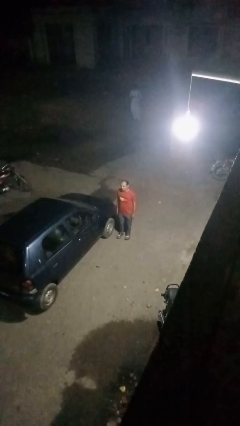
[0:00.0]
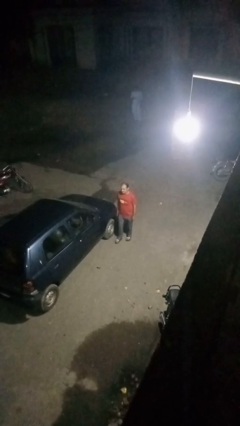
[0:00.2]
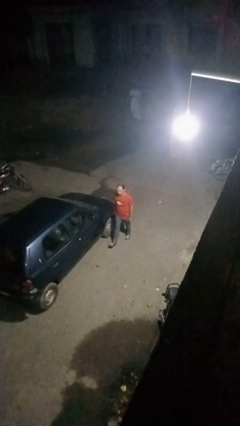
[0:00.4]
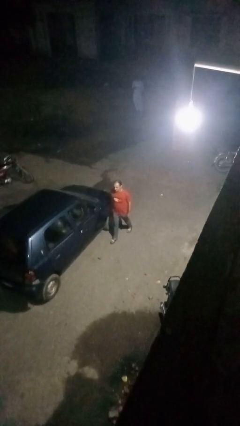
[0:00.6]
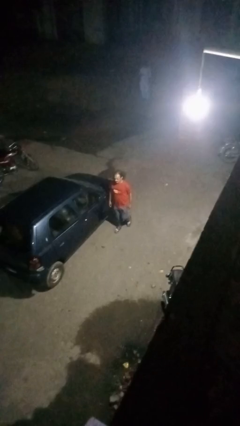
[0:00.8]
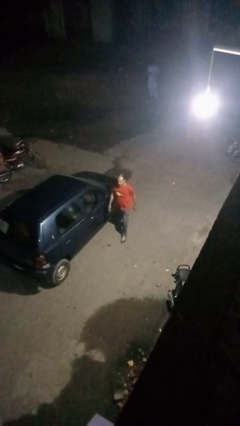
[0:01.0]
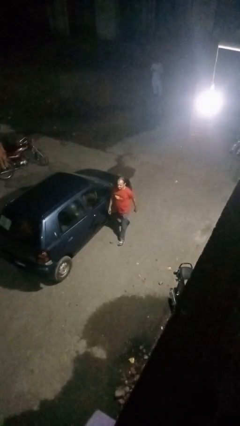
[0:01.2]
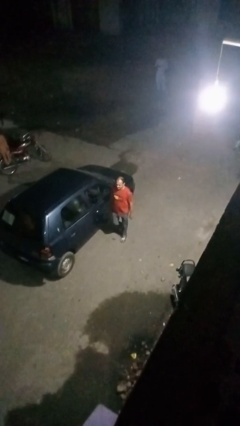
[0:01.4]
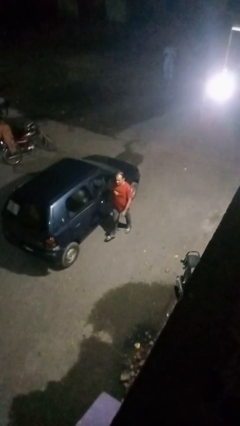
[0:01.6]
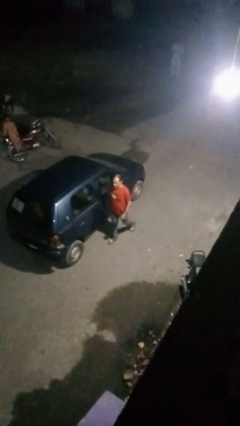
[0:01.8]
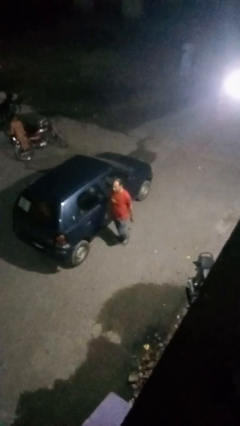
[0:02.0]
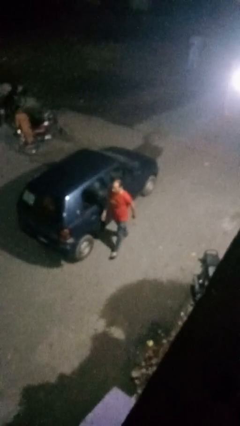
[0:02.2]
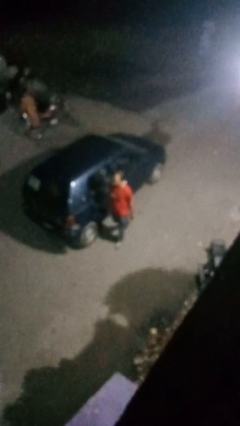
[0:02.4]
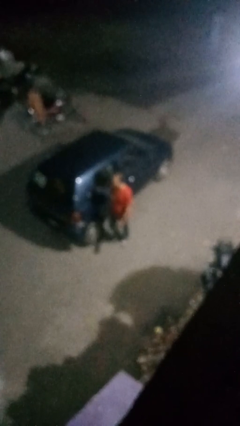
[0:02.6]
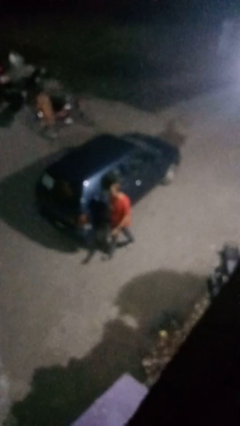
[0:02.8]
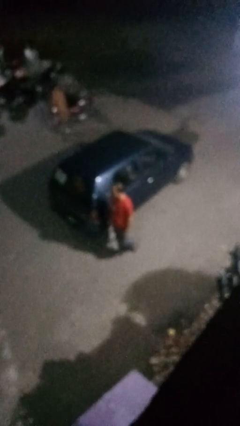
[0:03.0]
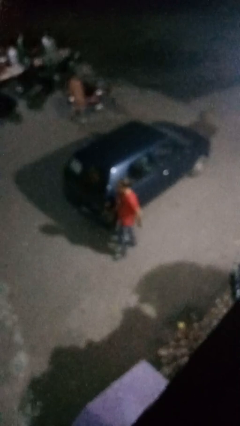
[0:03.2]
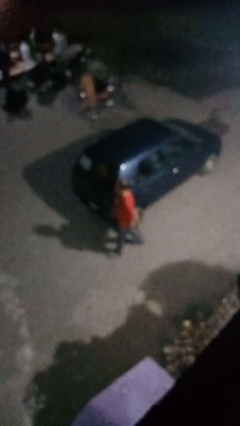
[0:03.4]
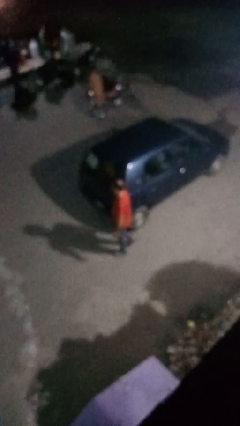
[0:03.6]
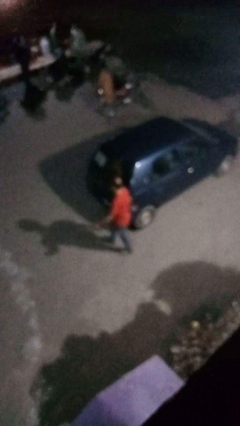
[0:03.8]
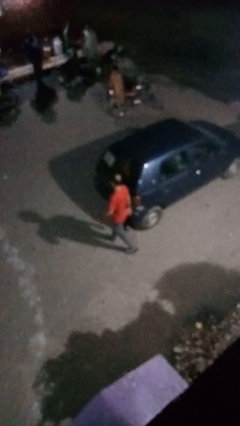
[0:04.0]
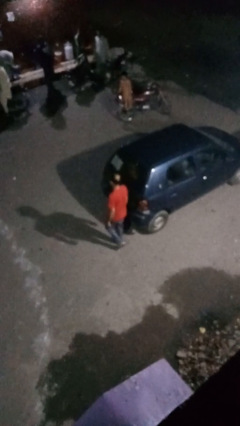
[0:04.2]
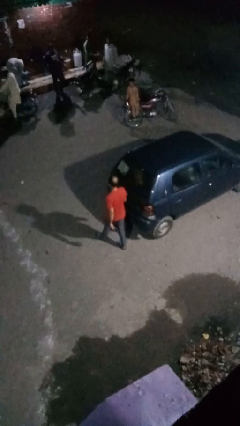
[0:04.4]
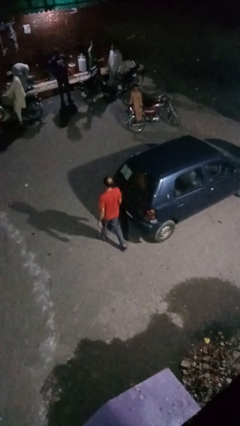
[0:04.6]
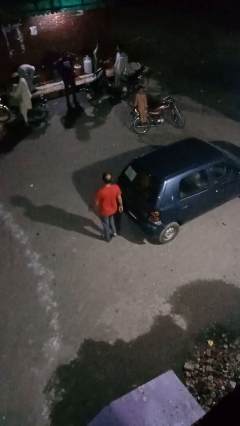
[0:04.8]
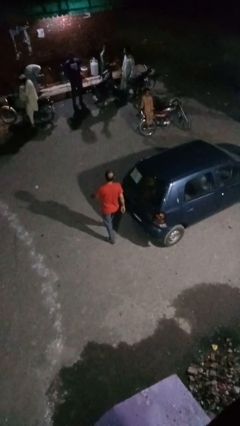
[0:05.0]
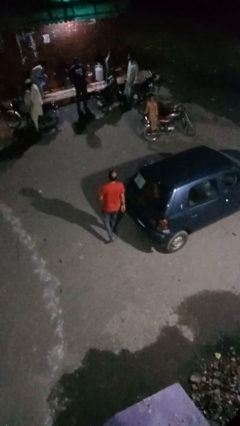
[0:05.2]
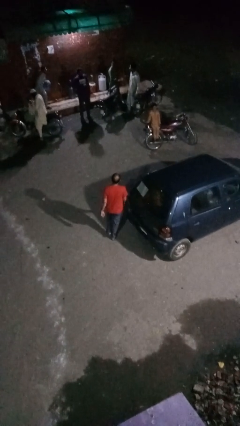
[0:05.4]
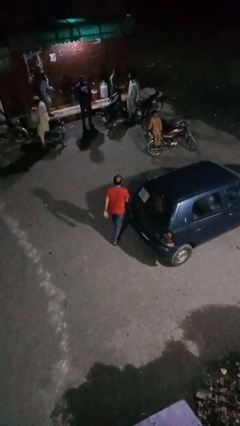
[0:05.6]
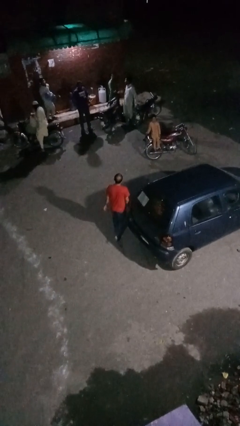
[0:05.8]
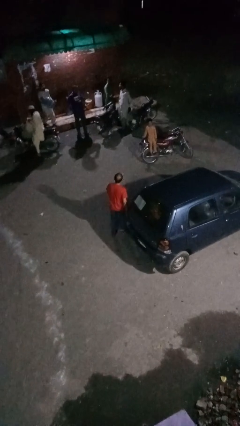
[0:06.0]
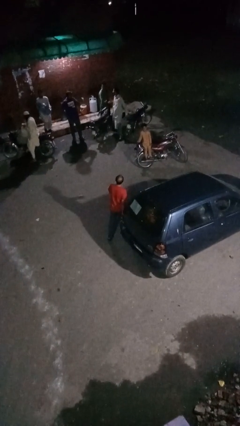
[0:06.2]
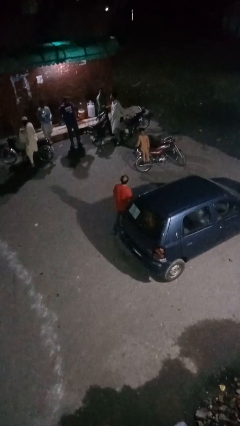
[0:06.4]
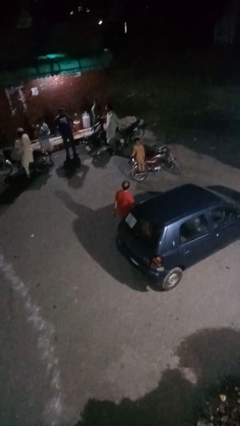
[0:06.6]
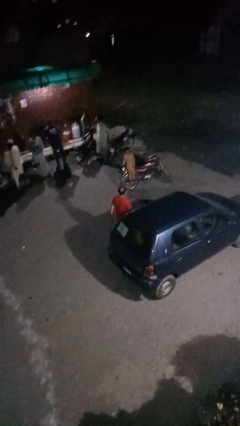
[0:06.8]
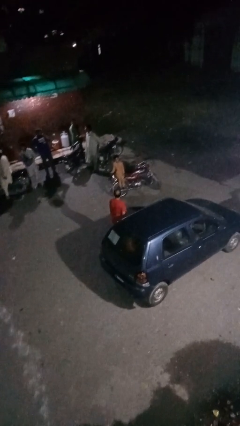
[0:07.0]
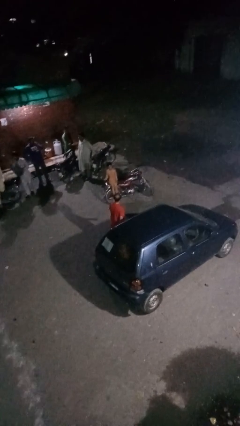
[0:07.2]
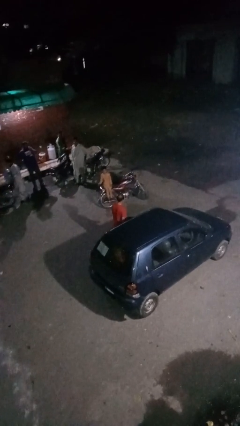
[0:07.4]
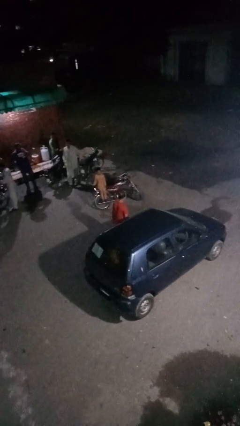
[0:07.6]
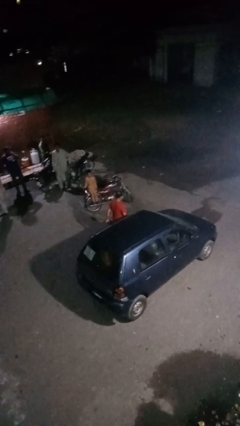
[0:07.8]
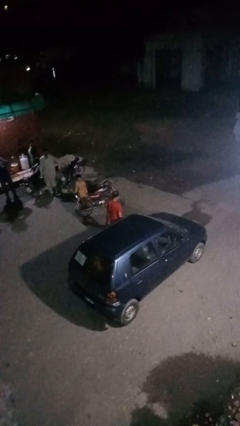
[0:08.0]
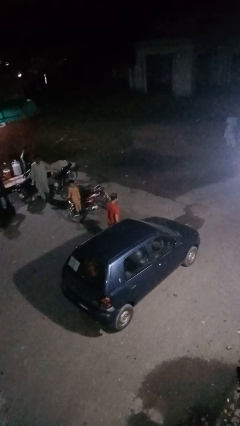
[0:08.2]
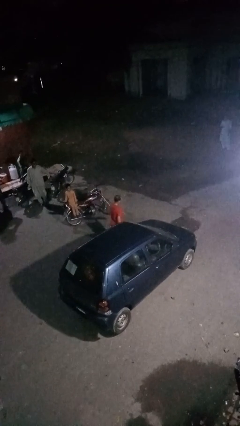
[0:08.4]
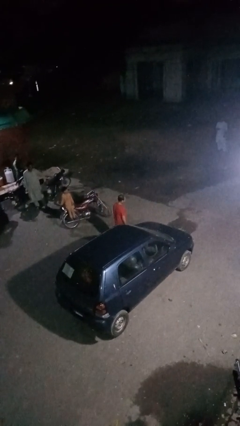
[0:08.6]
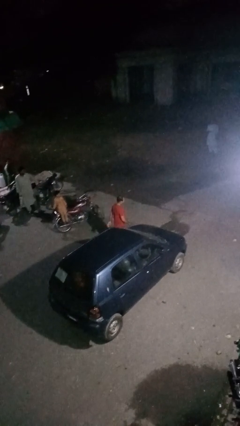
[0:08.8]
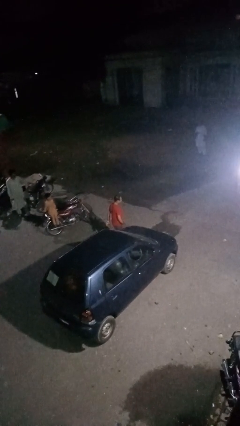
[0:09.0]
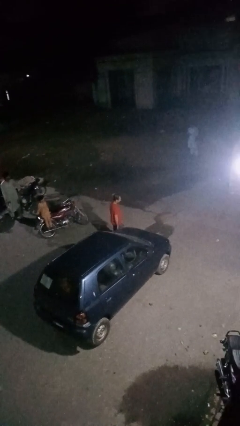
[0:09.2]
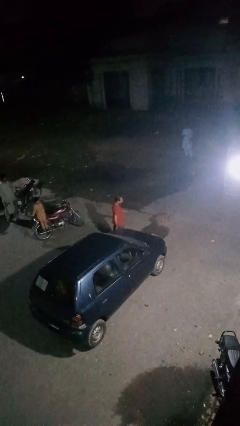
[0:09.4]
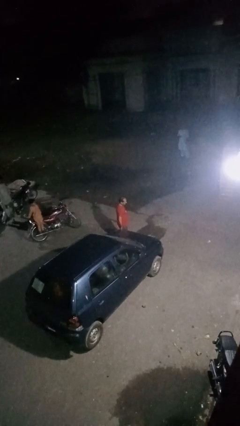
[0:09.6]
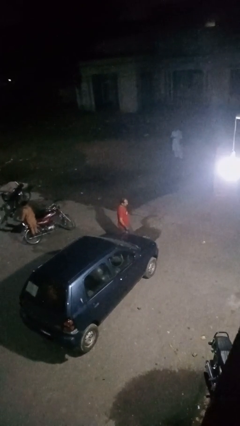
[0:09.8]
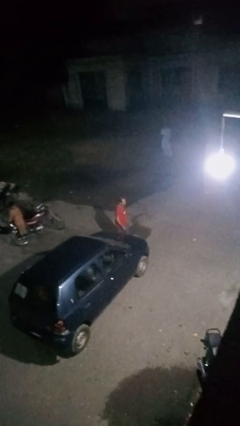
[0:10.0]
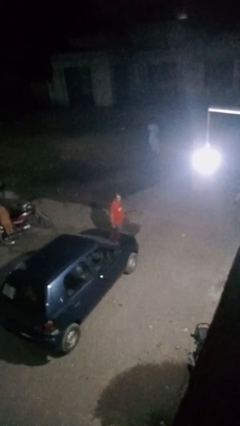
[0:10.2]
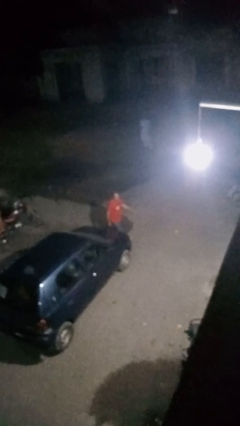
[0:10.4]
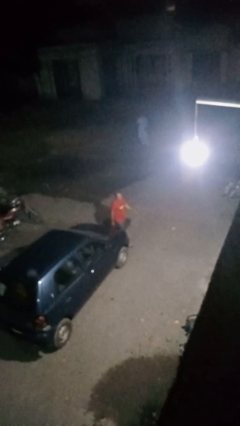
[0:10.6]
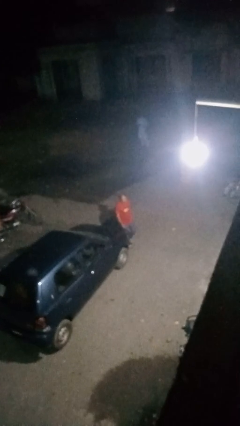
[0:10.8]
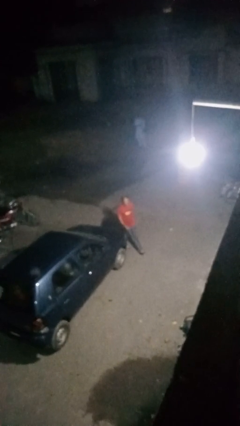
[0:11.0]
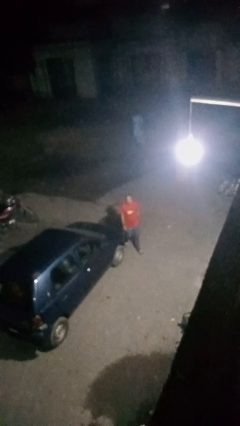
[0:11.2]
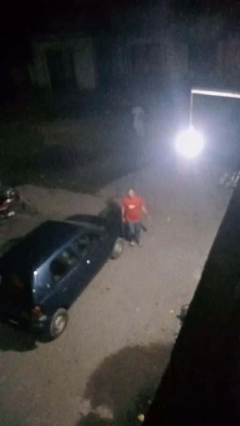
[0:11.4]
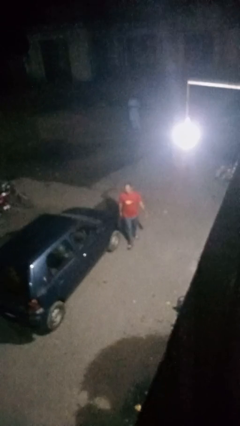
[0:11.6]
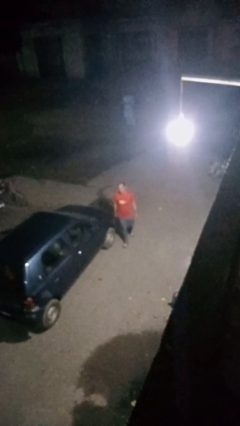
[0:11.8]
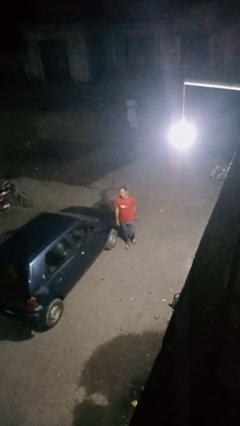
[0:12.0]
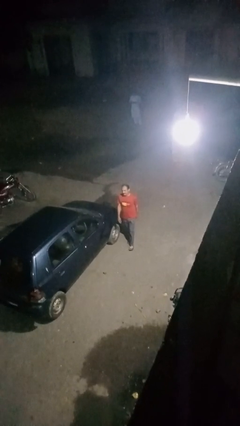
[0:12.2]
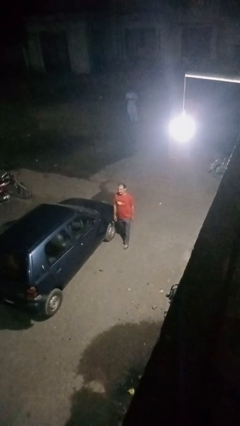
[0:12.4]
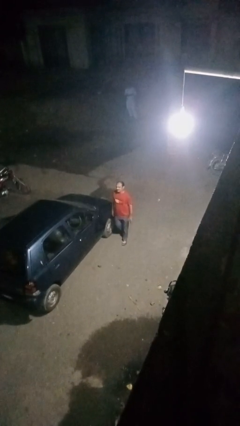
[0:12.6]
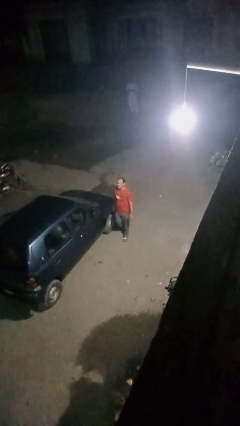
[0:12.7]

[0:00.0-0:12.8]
person walks around car

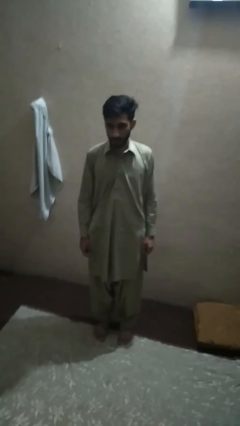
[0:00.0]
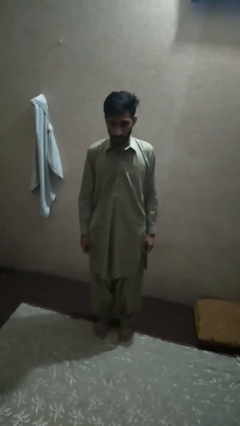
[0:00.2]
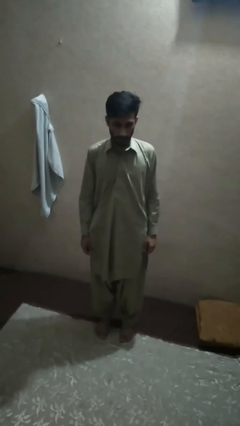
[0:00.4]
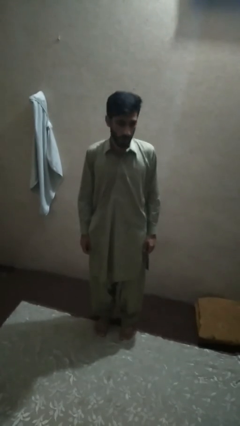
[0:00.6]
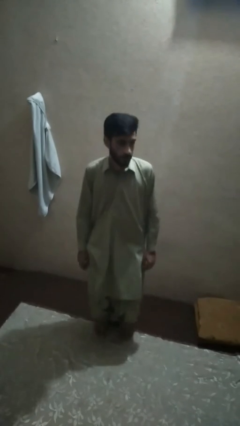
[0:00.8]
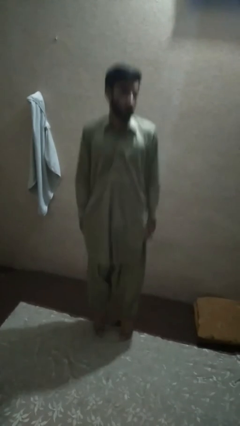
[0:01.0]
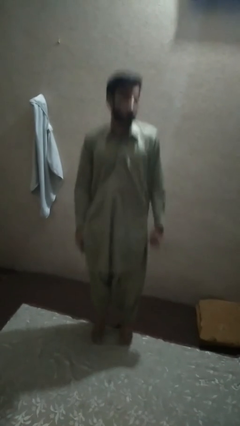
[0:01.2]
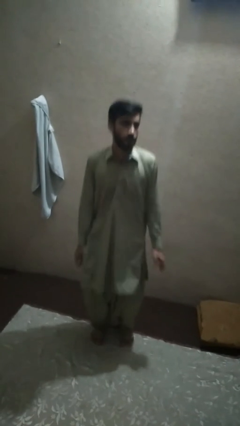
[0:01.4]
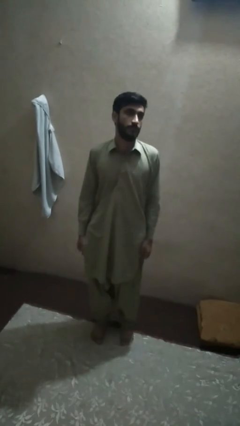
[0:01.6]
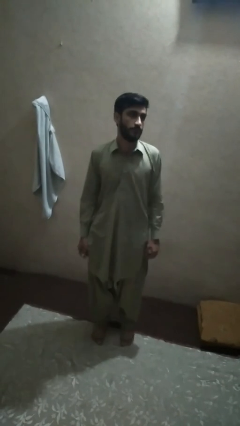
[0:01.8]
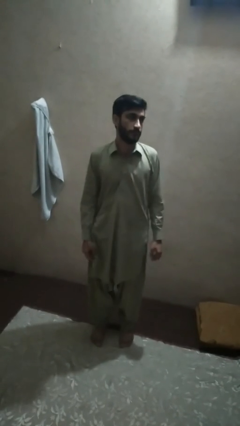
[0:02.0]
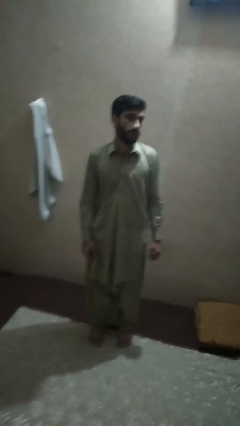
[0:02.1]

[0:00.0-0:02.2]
person jumps

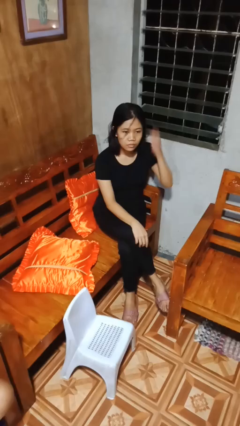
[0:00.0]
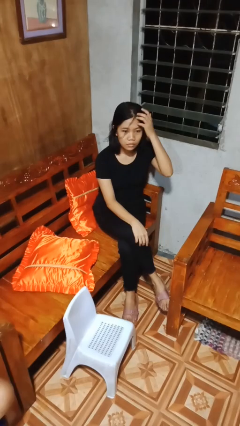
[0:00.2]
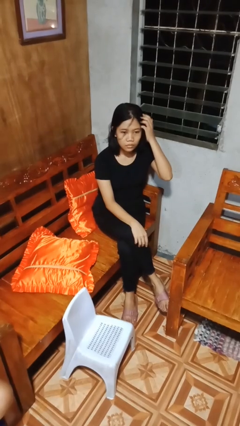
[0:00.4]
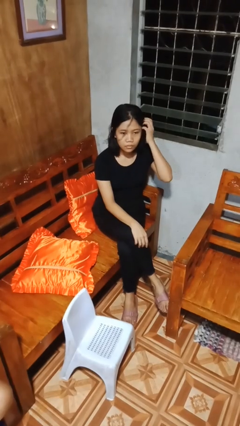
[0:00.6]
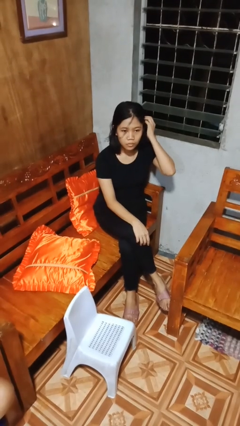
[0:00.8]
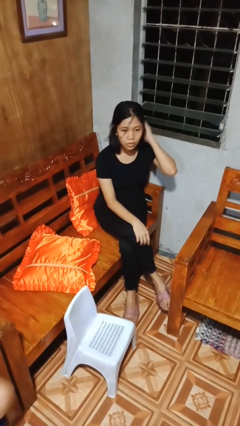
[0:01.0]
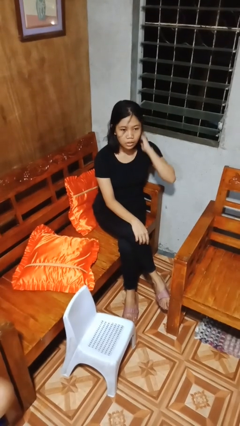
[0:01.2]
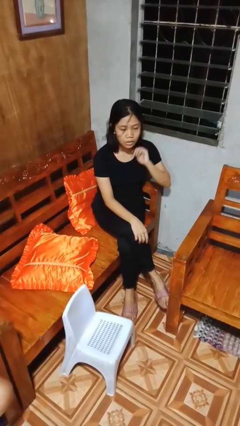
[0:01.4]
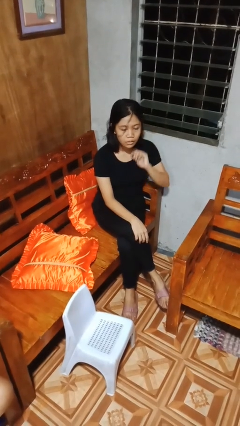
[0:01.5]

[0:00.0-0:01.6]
person strokes hair

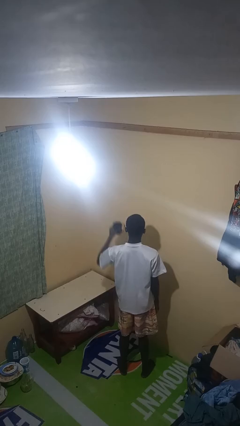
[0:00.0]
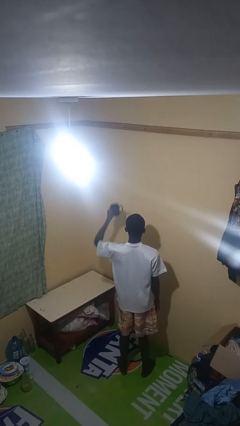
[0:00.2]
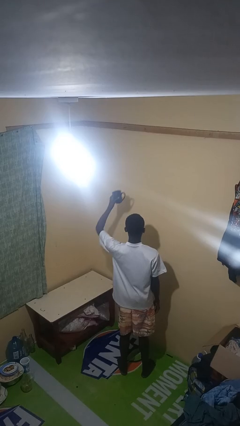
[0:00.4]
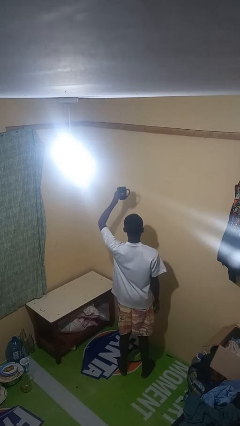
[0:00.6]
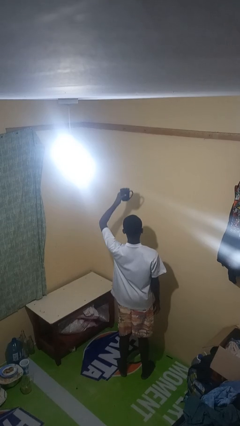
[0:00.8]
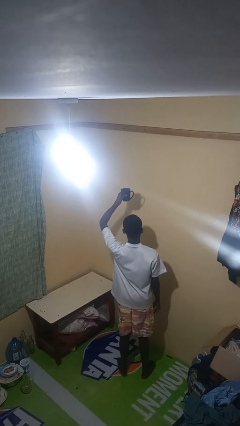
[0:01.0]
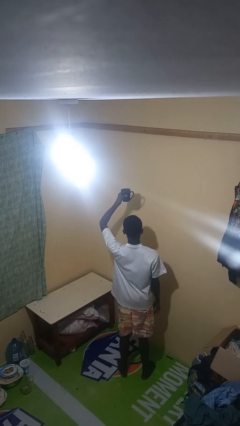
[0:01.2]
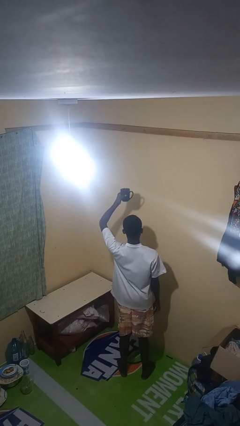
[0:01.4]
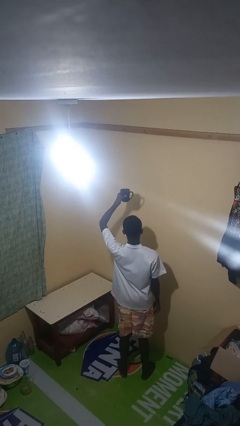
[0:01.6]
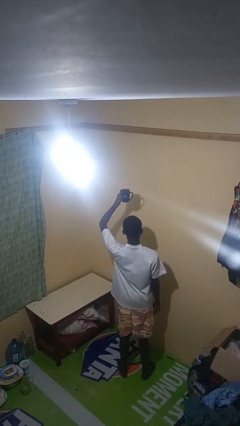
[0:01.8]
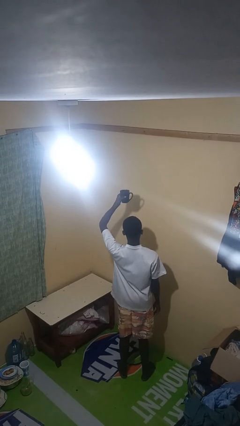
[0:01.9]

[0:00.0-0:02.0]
person holds object above head
